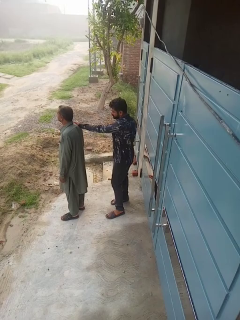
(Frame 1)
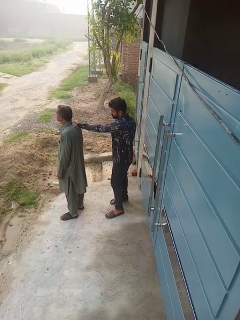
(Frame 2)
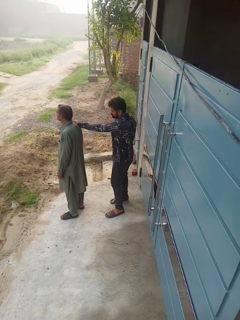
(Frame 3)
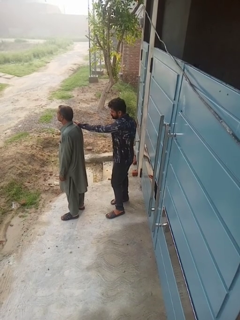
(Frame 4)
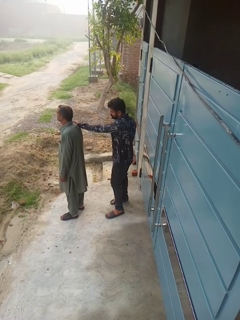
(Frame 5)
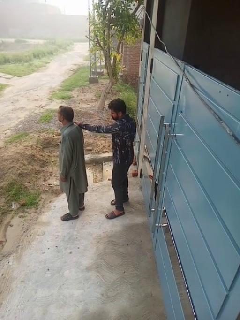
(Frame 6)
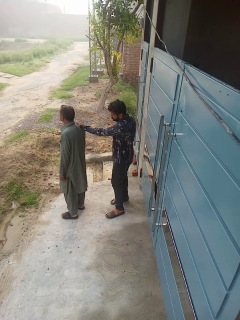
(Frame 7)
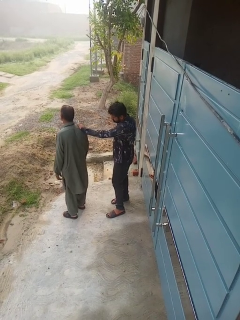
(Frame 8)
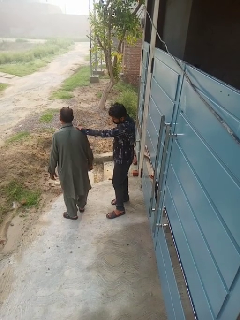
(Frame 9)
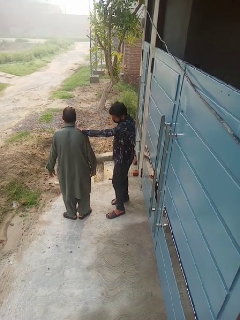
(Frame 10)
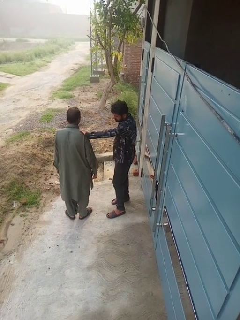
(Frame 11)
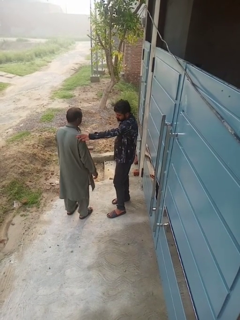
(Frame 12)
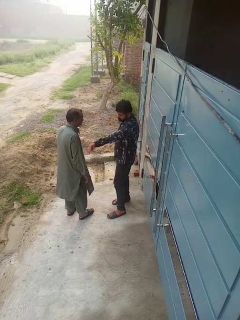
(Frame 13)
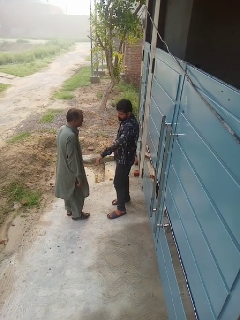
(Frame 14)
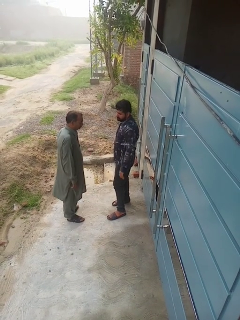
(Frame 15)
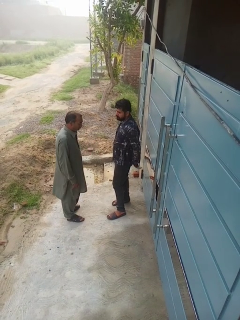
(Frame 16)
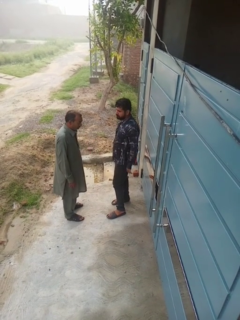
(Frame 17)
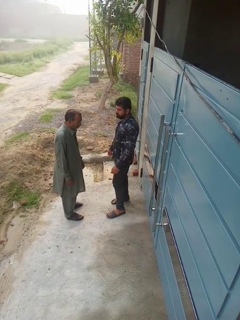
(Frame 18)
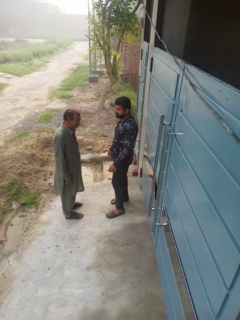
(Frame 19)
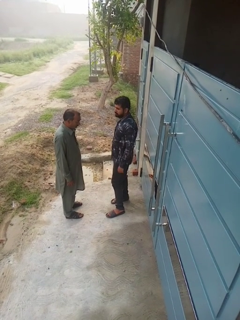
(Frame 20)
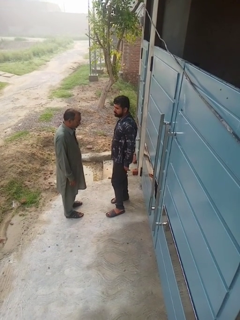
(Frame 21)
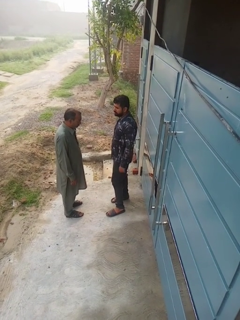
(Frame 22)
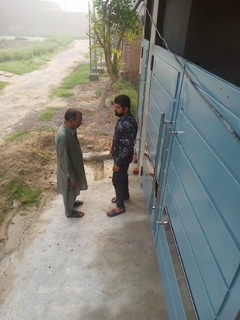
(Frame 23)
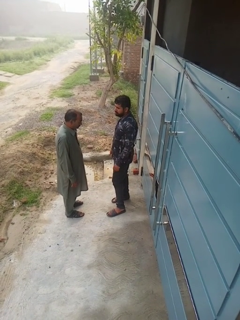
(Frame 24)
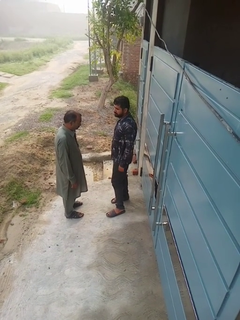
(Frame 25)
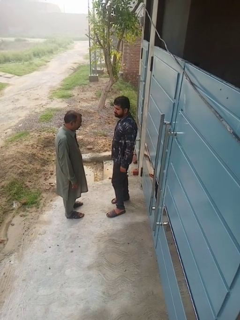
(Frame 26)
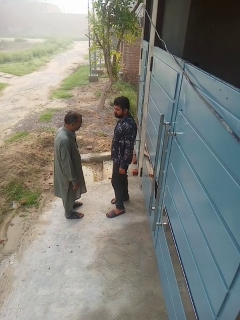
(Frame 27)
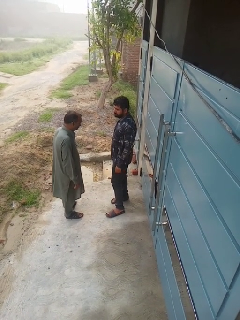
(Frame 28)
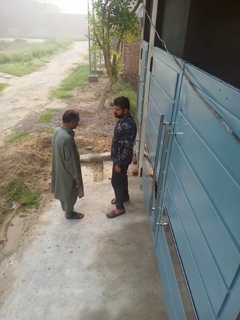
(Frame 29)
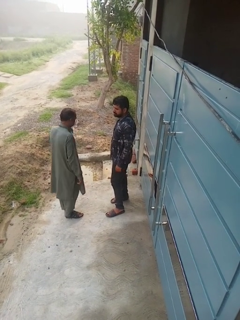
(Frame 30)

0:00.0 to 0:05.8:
person spins person around

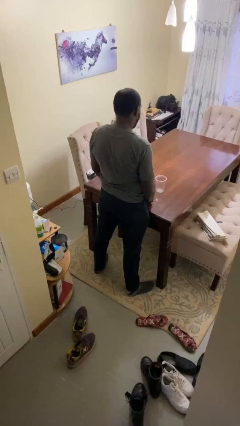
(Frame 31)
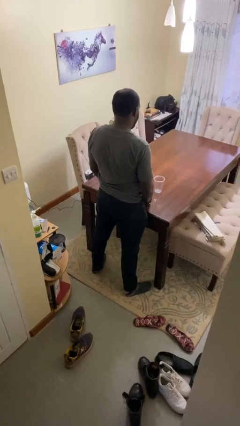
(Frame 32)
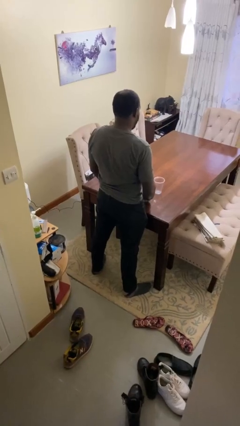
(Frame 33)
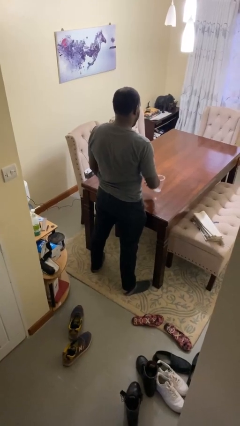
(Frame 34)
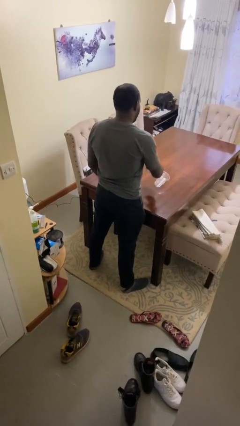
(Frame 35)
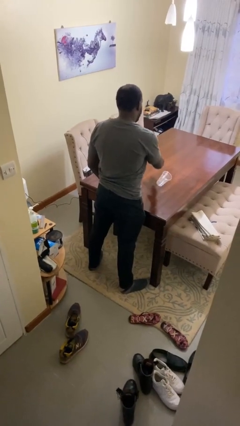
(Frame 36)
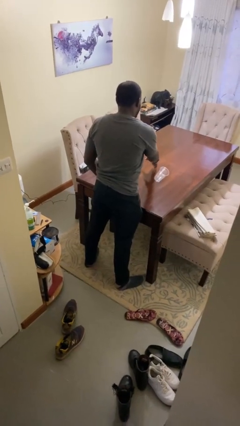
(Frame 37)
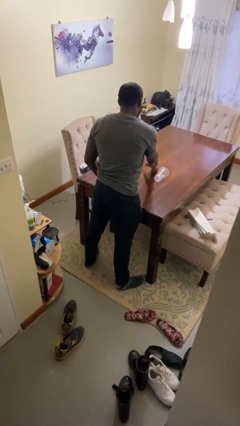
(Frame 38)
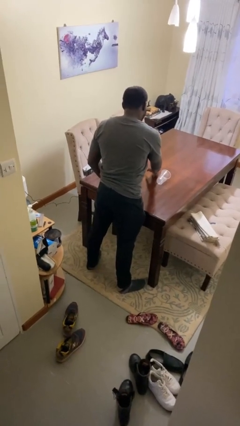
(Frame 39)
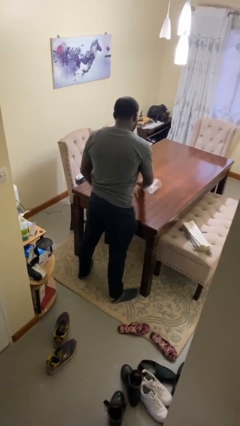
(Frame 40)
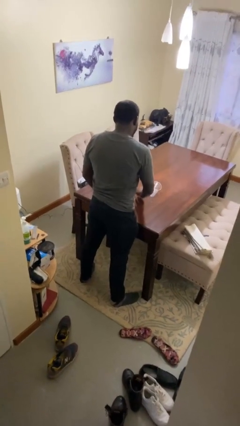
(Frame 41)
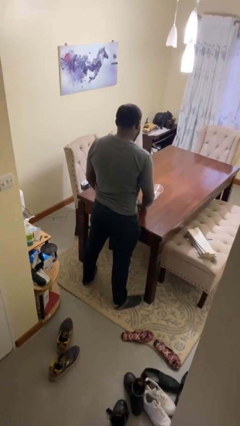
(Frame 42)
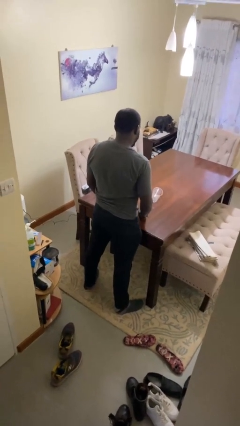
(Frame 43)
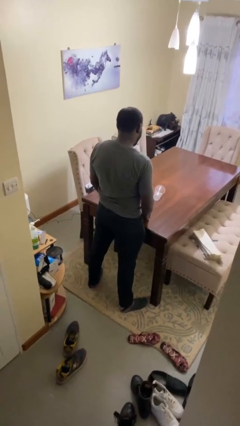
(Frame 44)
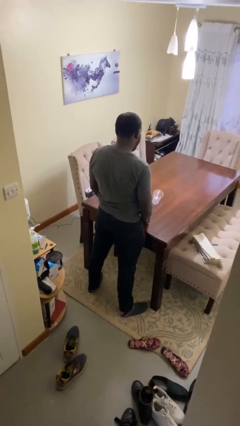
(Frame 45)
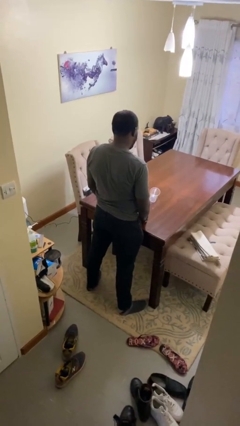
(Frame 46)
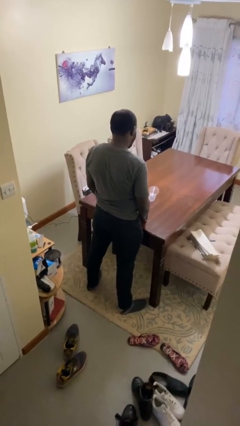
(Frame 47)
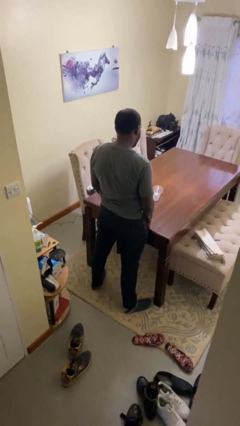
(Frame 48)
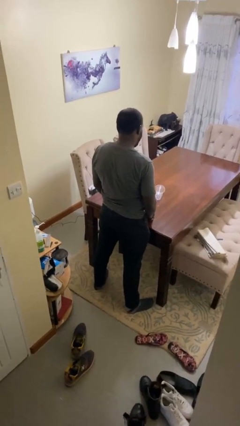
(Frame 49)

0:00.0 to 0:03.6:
person knocks over glass

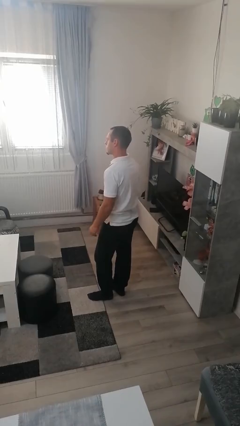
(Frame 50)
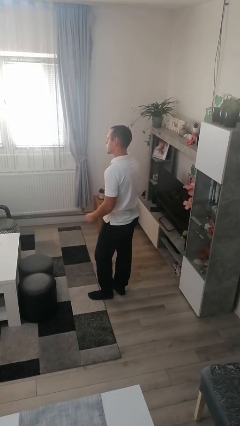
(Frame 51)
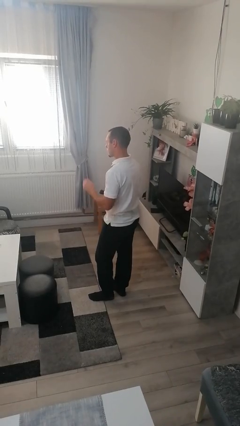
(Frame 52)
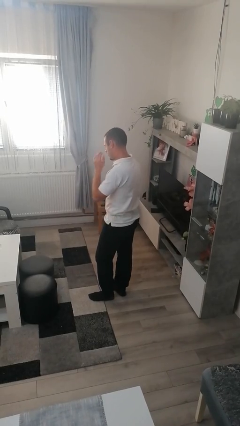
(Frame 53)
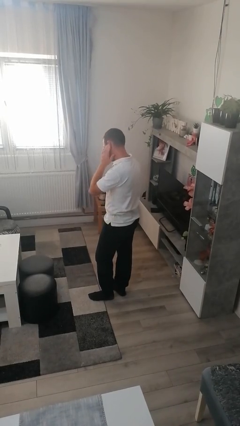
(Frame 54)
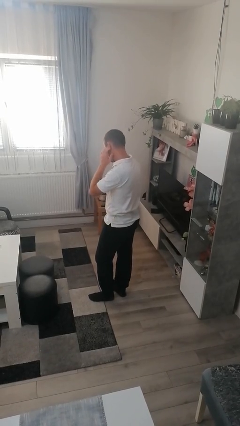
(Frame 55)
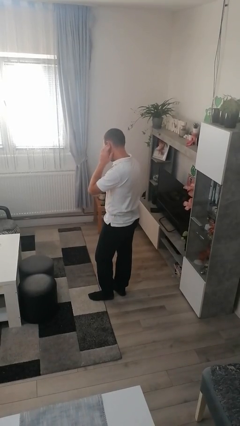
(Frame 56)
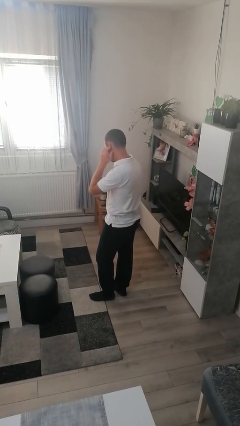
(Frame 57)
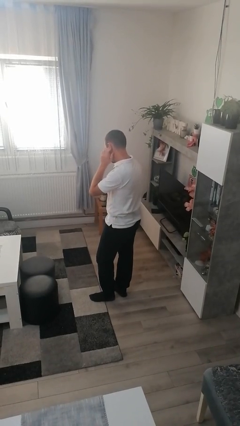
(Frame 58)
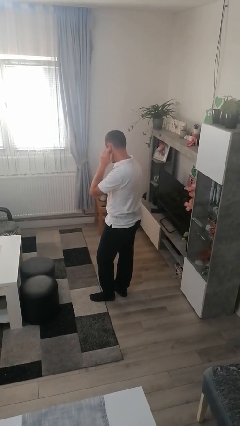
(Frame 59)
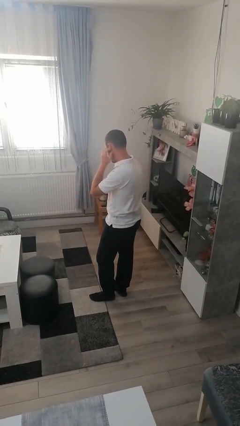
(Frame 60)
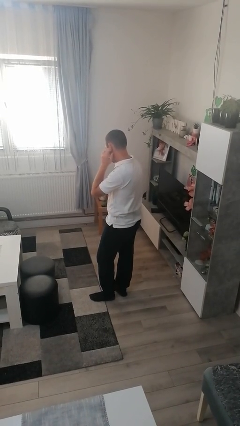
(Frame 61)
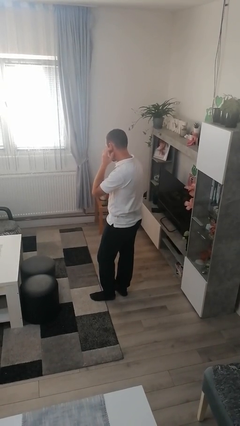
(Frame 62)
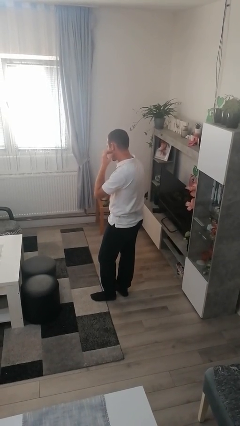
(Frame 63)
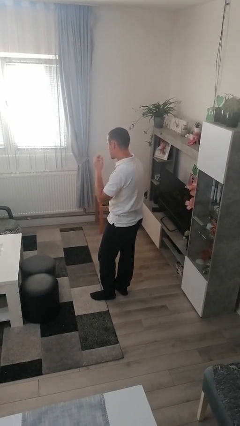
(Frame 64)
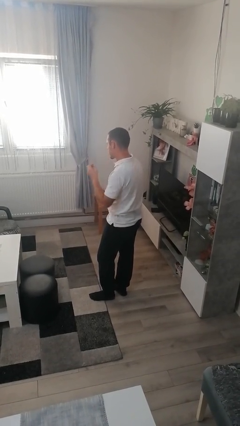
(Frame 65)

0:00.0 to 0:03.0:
person touches earlobe

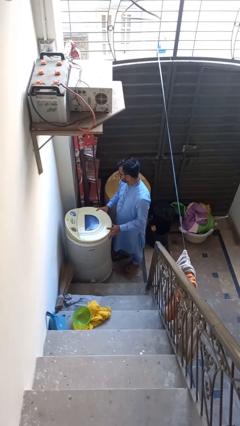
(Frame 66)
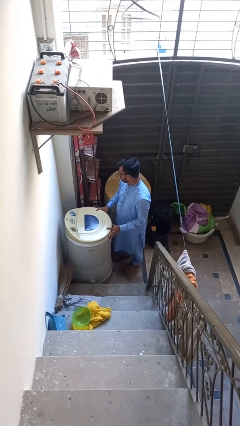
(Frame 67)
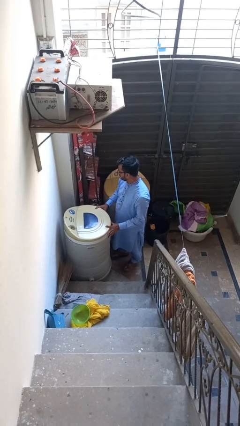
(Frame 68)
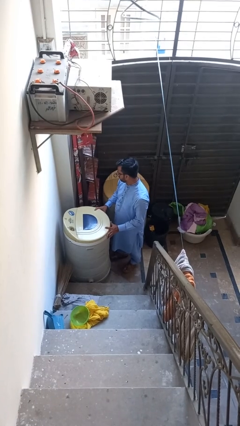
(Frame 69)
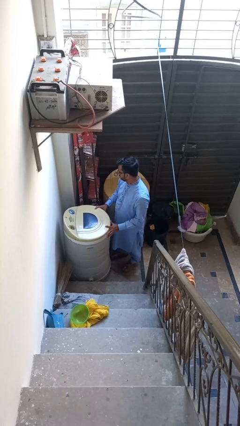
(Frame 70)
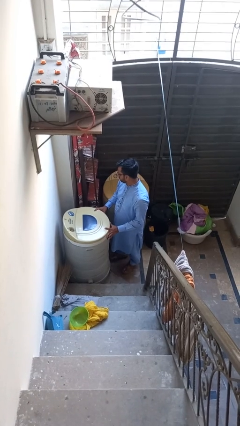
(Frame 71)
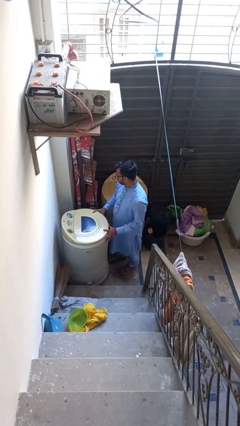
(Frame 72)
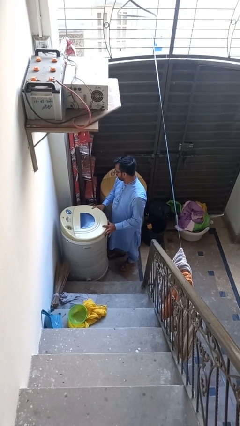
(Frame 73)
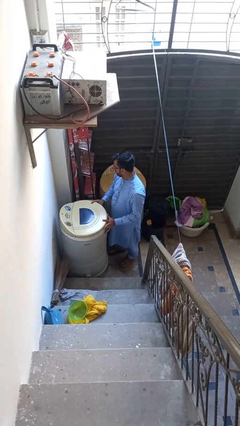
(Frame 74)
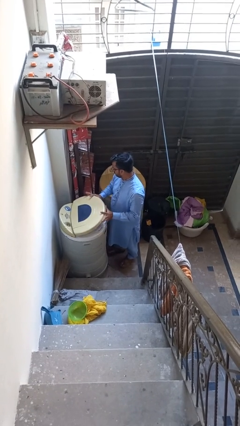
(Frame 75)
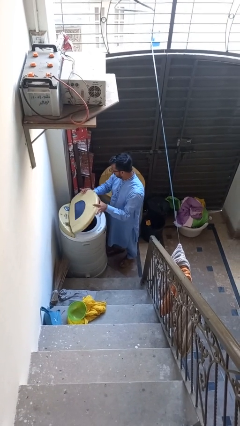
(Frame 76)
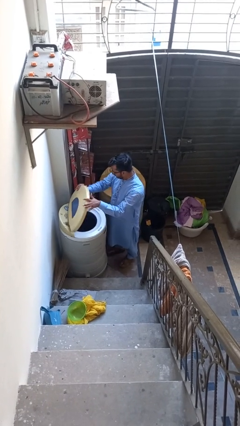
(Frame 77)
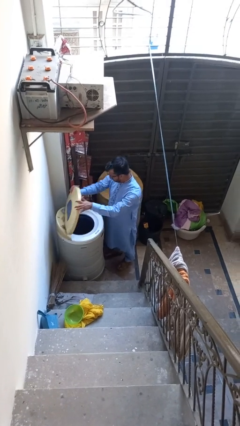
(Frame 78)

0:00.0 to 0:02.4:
person closes clothes washer

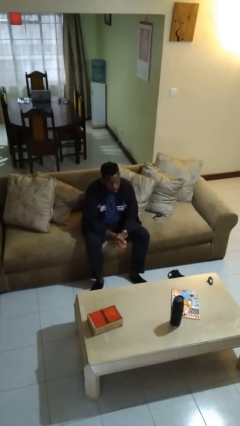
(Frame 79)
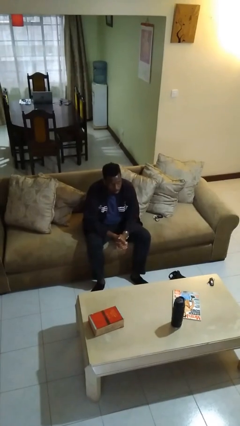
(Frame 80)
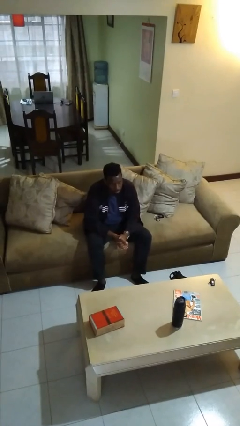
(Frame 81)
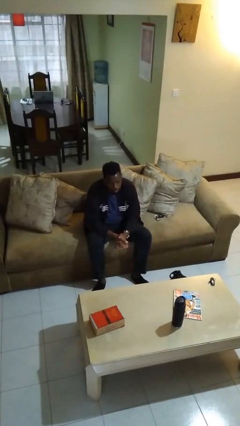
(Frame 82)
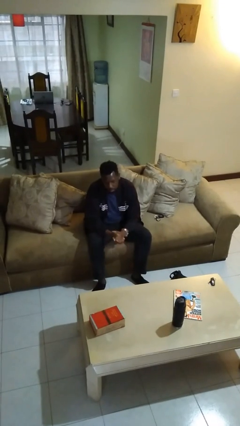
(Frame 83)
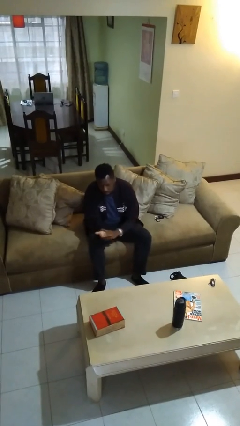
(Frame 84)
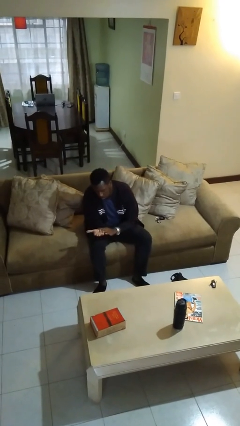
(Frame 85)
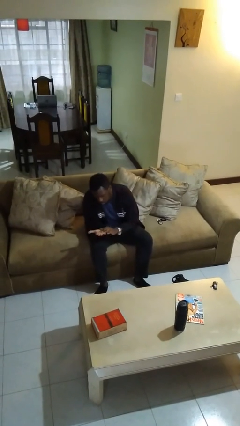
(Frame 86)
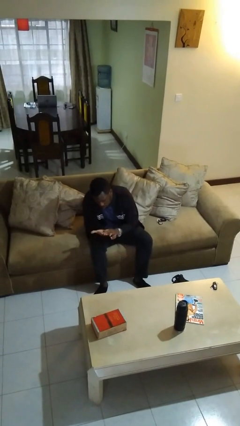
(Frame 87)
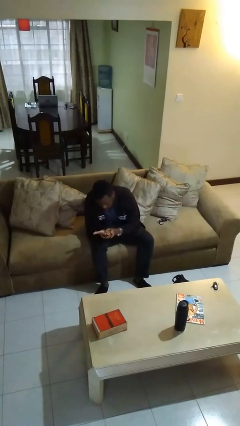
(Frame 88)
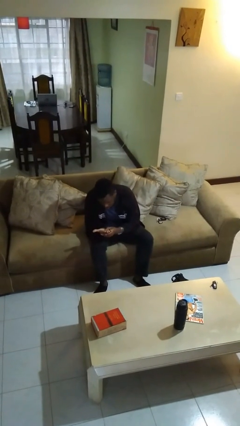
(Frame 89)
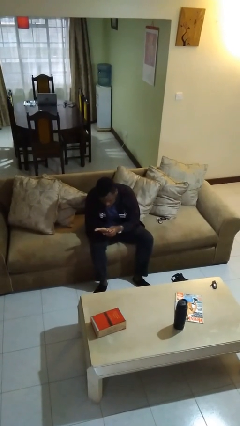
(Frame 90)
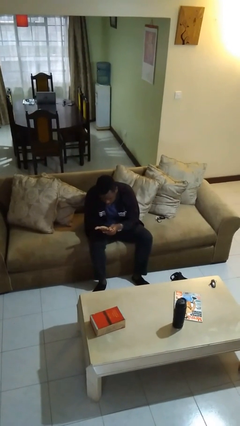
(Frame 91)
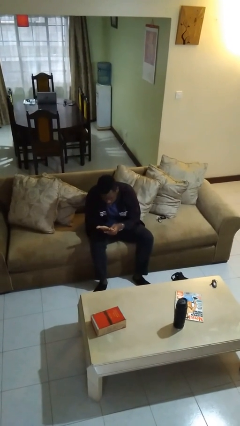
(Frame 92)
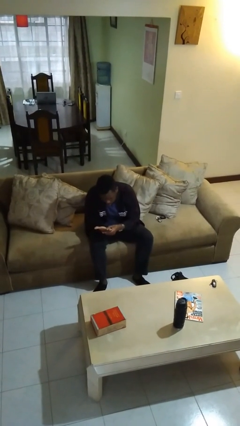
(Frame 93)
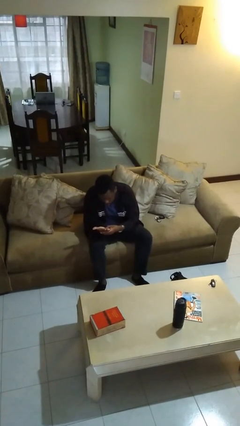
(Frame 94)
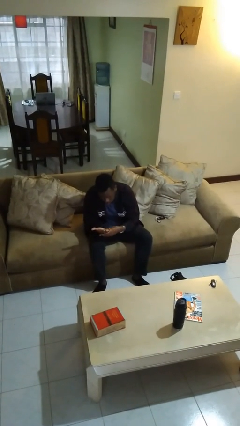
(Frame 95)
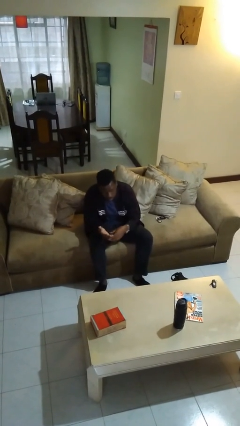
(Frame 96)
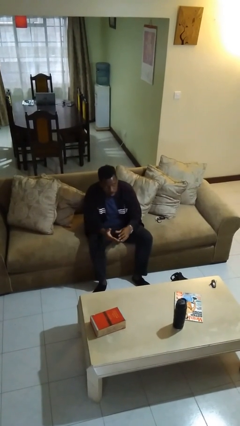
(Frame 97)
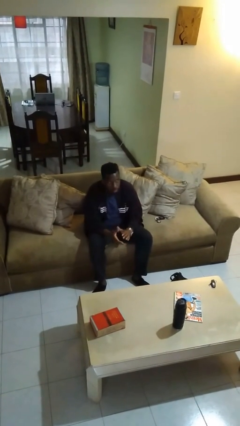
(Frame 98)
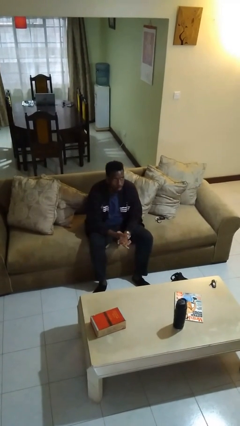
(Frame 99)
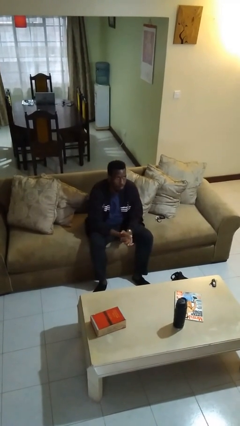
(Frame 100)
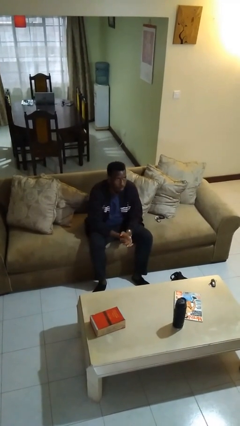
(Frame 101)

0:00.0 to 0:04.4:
person looks at hands in lap

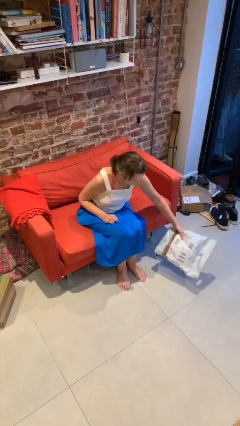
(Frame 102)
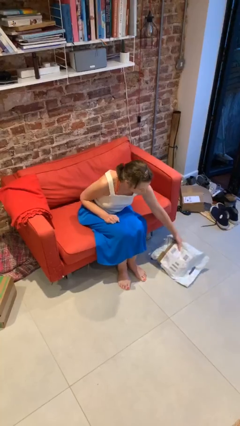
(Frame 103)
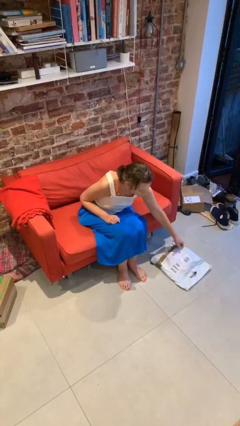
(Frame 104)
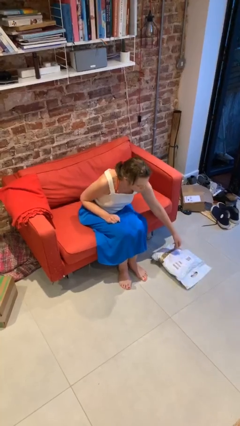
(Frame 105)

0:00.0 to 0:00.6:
person puts down object on floor
